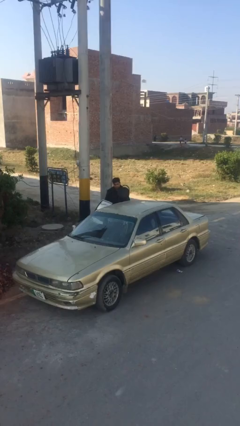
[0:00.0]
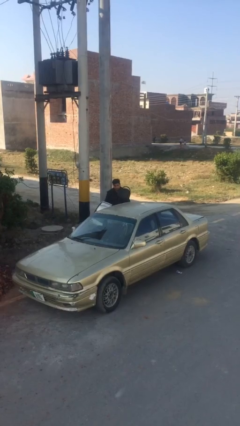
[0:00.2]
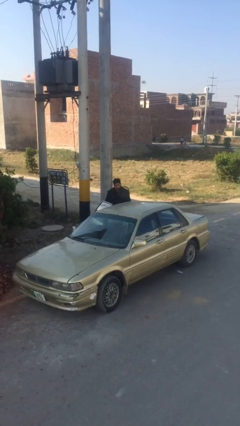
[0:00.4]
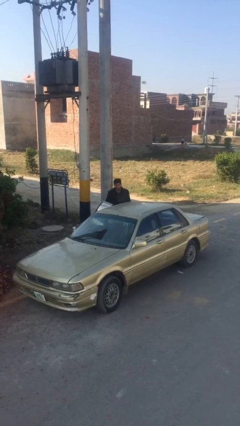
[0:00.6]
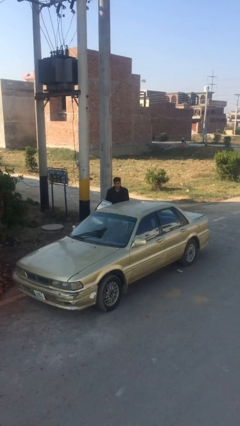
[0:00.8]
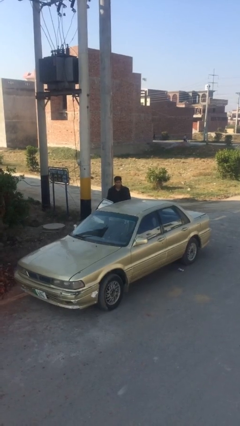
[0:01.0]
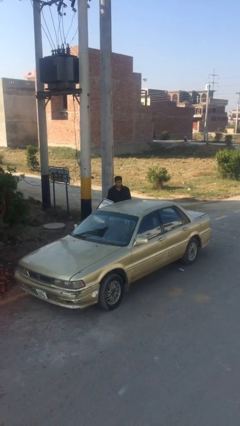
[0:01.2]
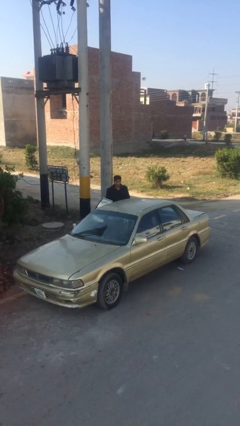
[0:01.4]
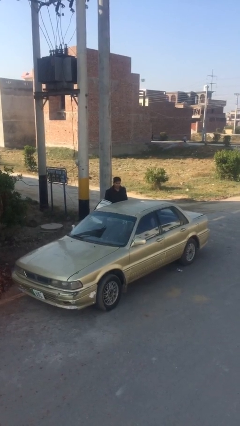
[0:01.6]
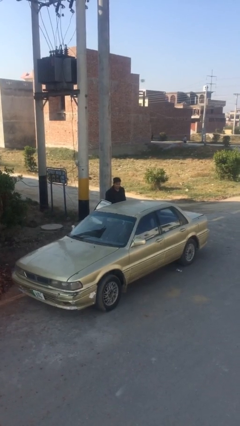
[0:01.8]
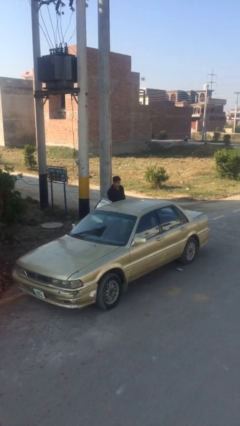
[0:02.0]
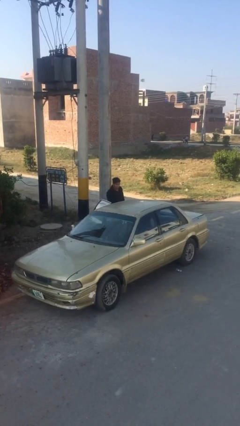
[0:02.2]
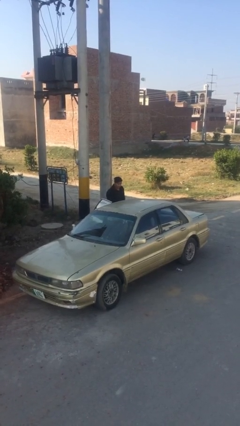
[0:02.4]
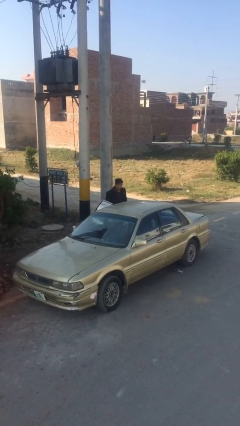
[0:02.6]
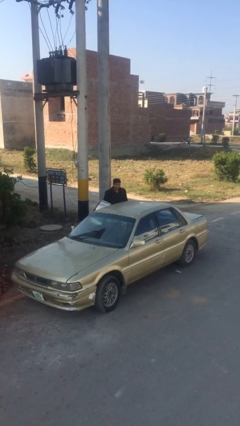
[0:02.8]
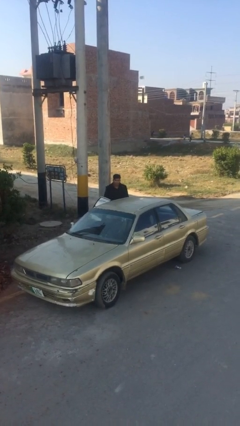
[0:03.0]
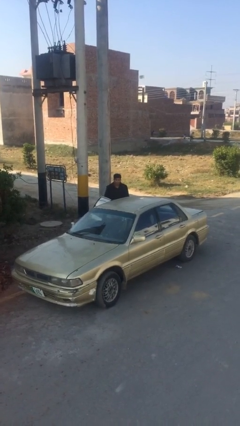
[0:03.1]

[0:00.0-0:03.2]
person loads car

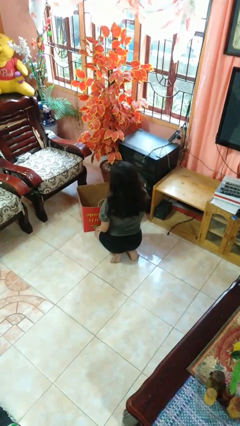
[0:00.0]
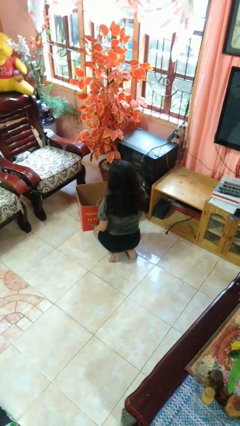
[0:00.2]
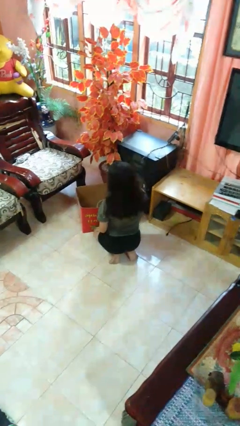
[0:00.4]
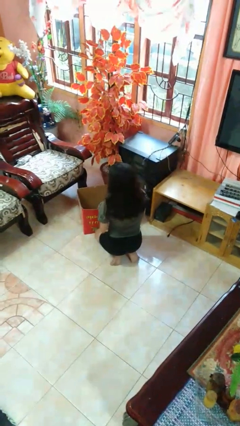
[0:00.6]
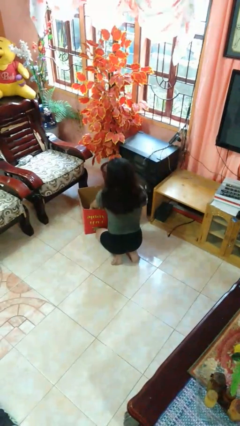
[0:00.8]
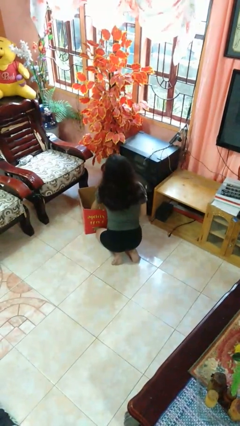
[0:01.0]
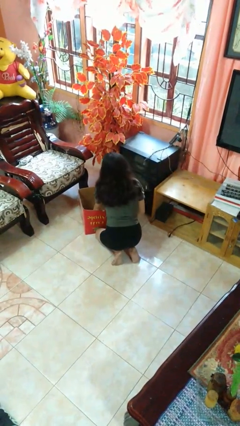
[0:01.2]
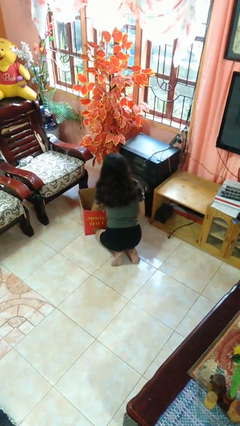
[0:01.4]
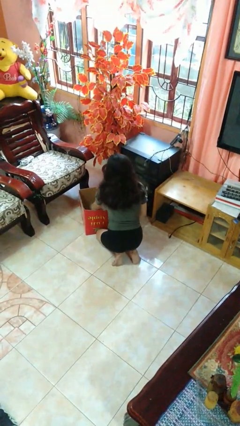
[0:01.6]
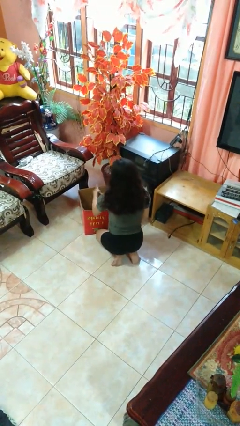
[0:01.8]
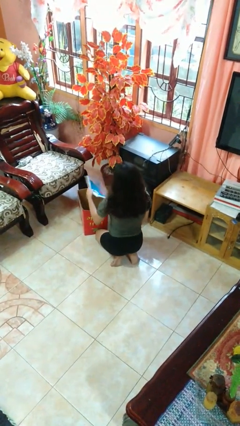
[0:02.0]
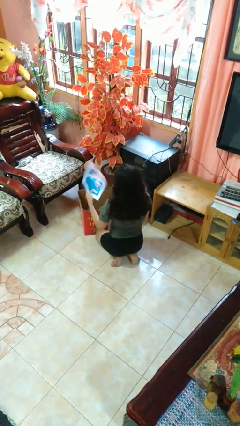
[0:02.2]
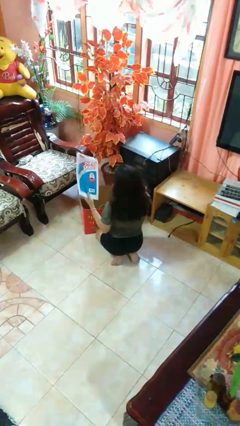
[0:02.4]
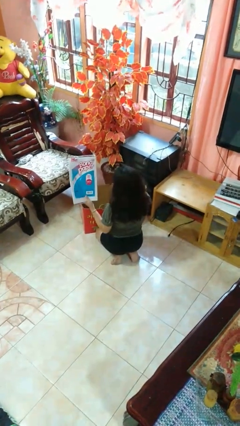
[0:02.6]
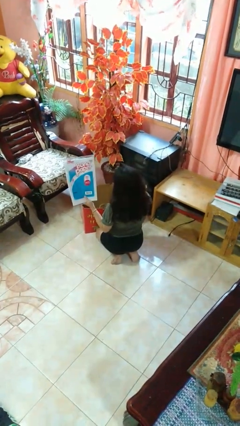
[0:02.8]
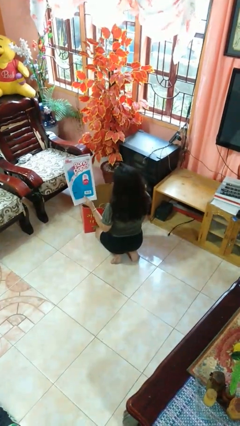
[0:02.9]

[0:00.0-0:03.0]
person takes object from box

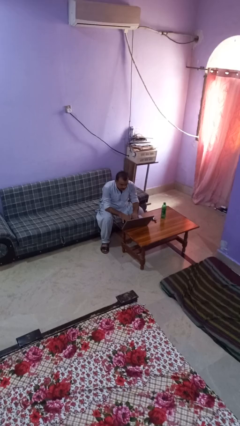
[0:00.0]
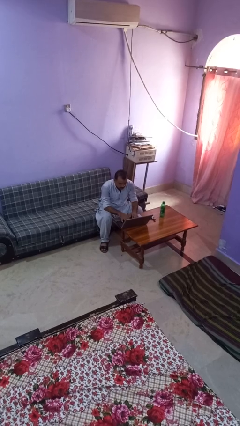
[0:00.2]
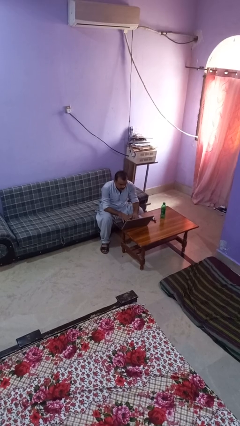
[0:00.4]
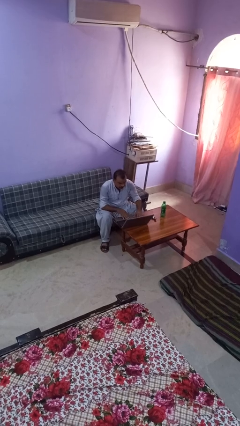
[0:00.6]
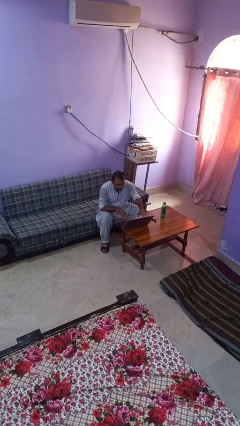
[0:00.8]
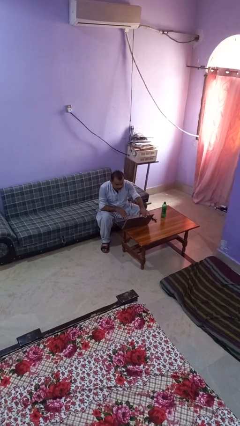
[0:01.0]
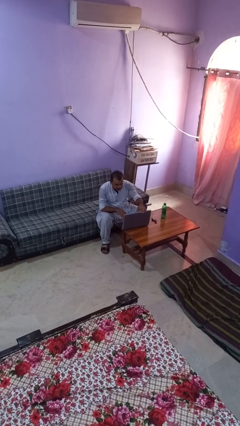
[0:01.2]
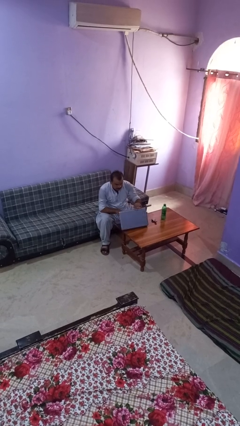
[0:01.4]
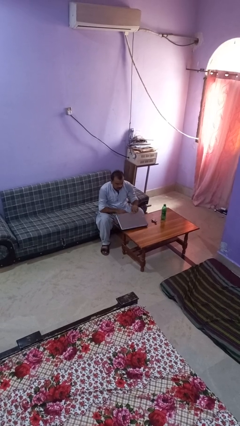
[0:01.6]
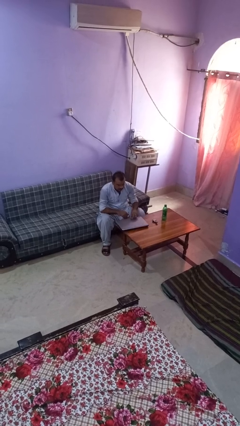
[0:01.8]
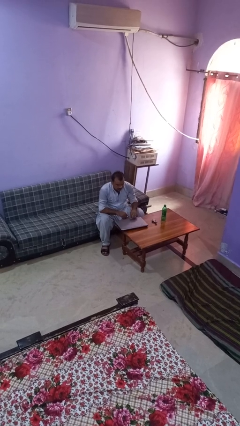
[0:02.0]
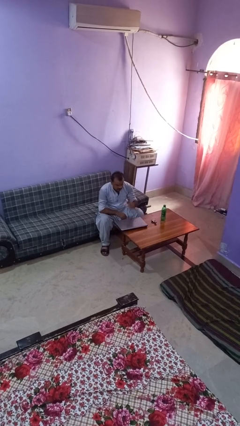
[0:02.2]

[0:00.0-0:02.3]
person closes laptop

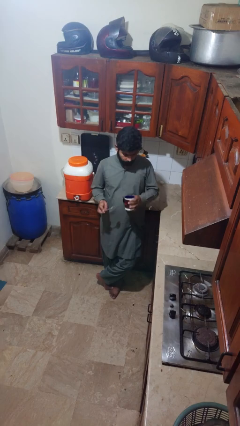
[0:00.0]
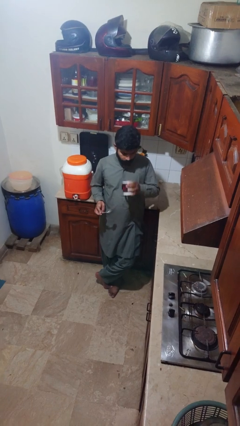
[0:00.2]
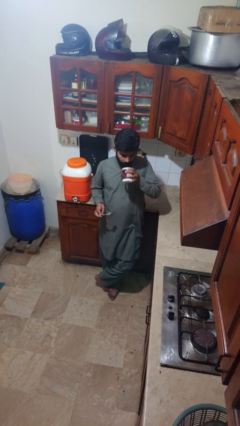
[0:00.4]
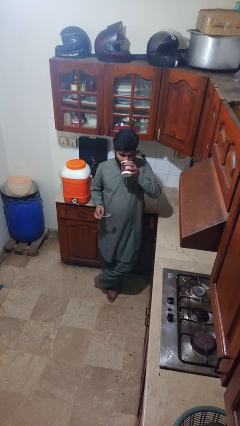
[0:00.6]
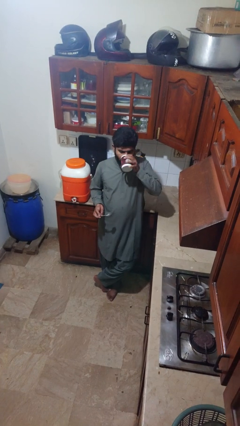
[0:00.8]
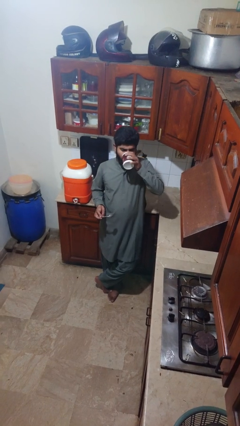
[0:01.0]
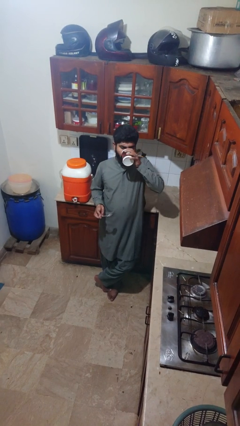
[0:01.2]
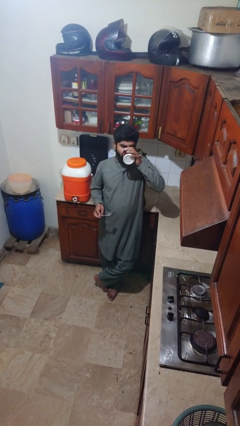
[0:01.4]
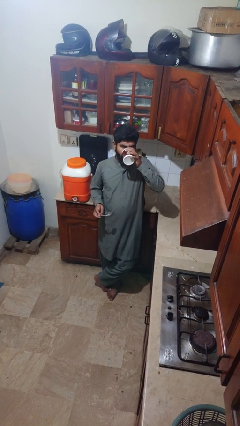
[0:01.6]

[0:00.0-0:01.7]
person drinks from mug

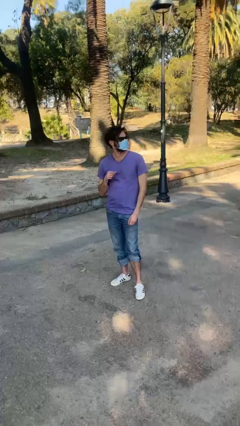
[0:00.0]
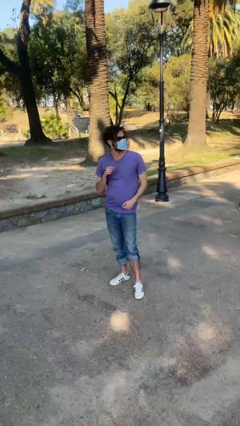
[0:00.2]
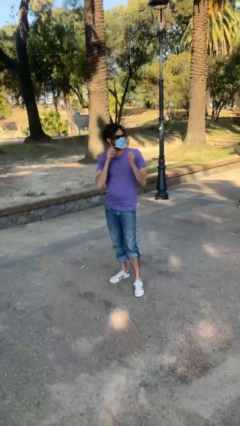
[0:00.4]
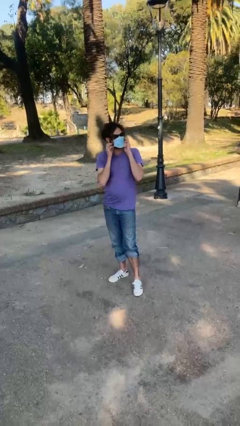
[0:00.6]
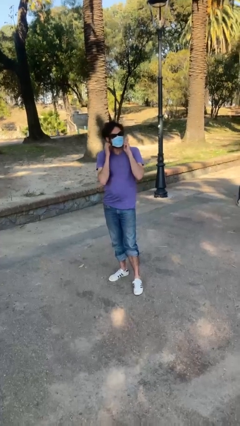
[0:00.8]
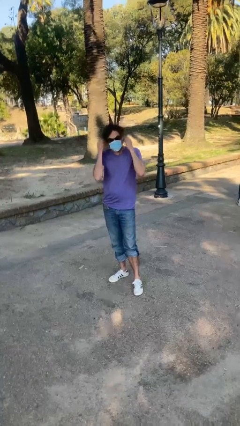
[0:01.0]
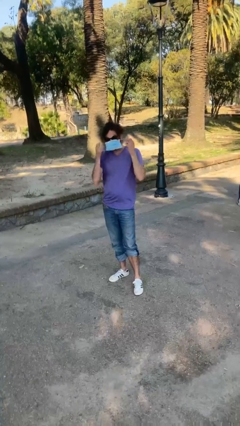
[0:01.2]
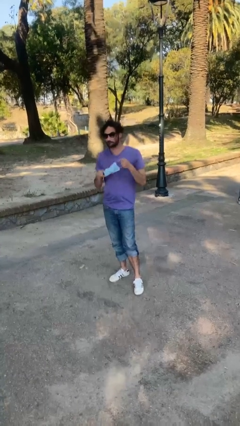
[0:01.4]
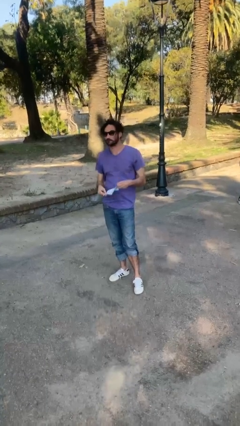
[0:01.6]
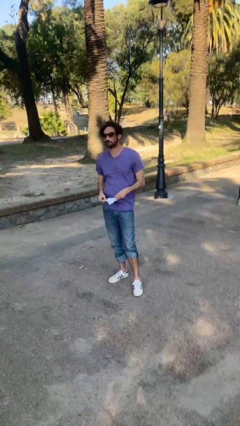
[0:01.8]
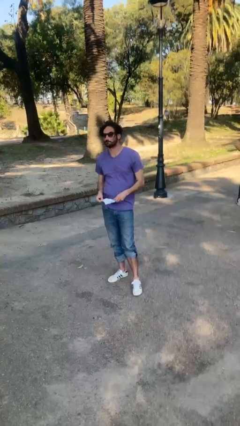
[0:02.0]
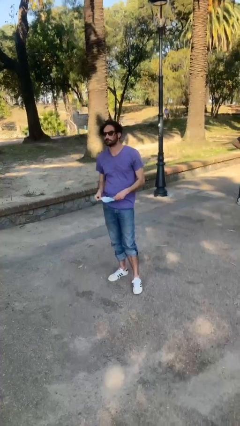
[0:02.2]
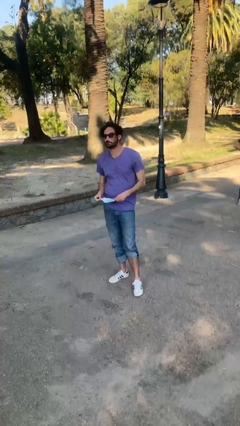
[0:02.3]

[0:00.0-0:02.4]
person takes off facemask

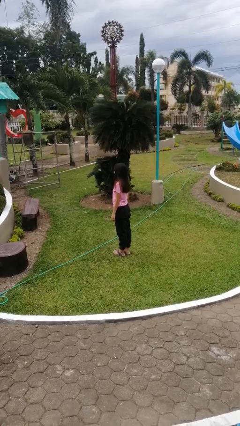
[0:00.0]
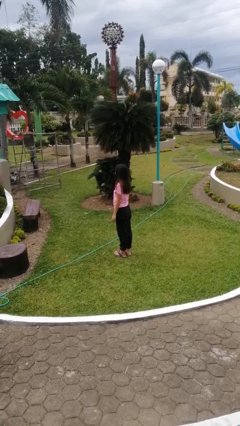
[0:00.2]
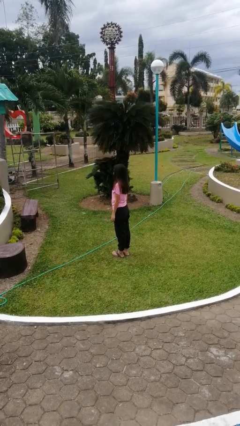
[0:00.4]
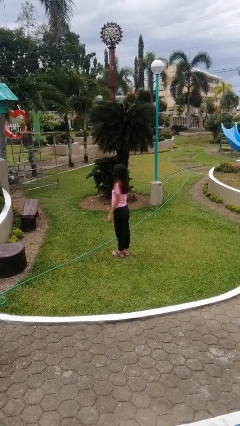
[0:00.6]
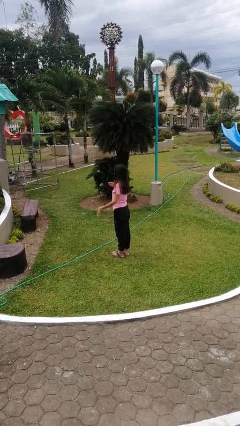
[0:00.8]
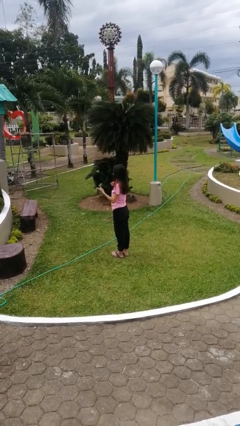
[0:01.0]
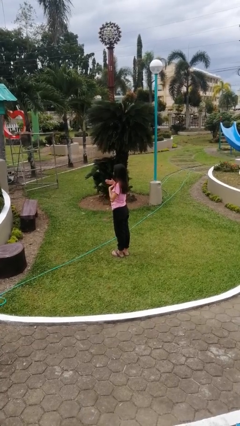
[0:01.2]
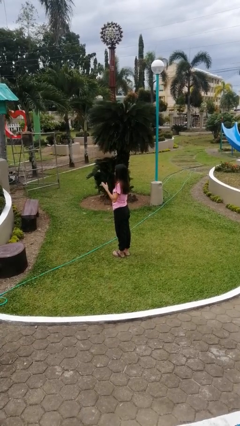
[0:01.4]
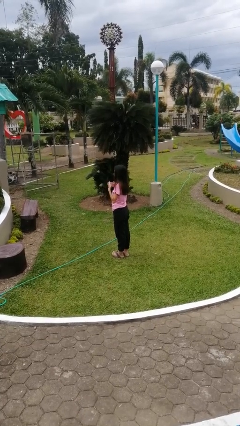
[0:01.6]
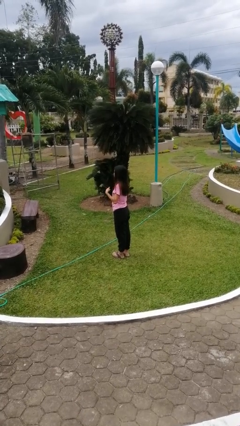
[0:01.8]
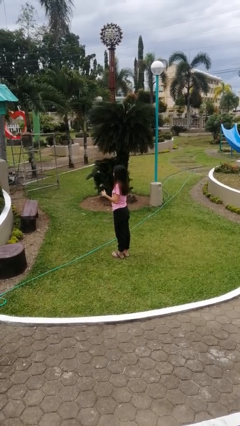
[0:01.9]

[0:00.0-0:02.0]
person drums on chest

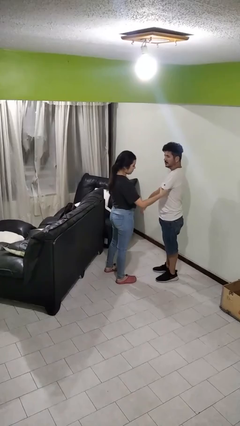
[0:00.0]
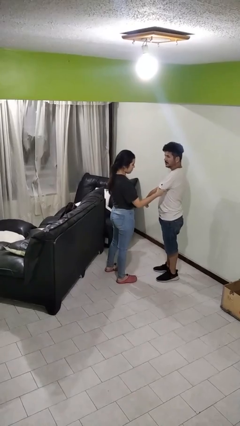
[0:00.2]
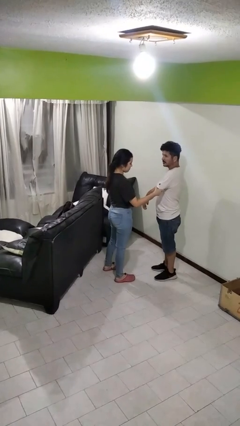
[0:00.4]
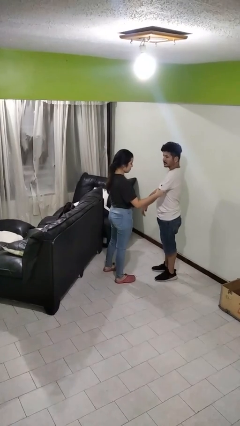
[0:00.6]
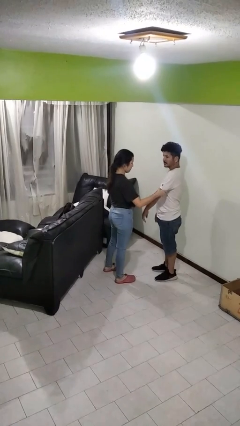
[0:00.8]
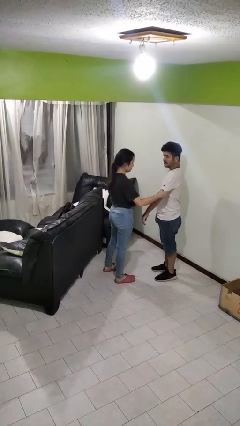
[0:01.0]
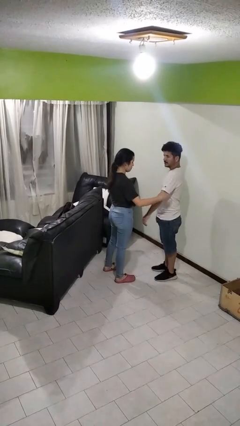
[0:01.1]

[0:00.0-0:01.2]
person grabs person by bicep

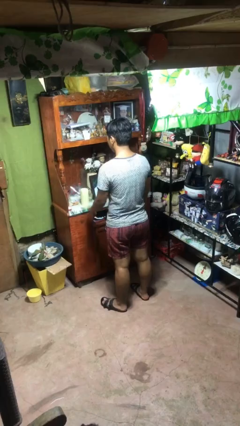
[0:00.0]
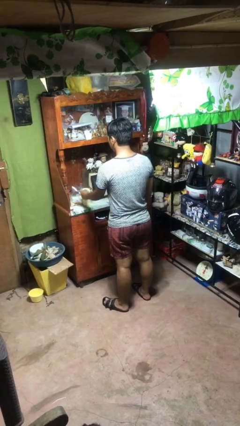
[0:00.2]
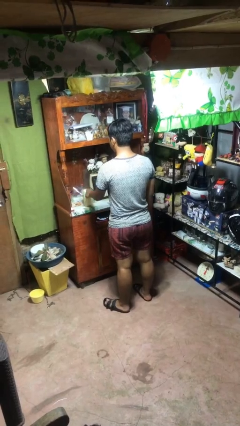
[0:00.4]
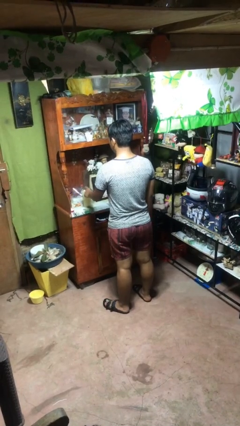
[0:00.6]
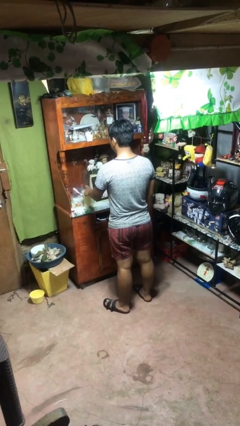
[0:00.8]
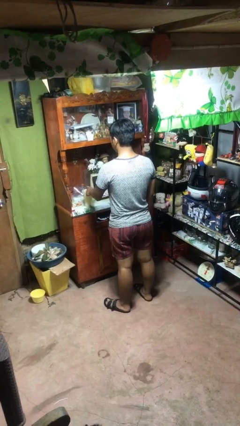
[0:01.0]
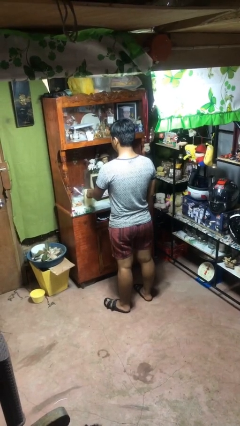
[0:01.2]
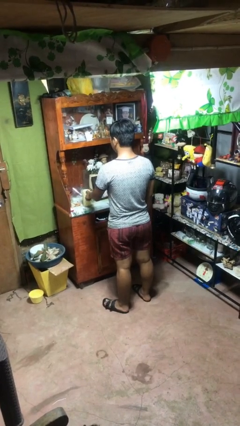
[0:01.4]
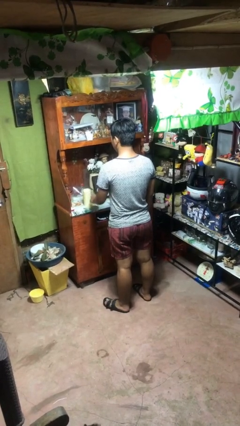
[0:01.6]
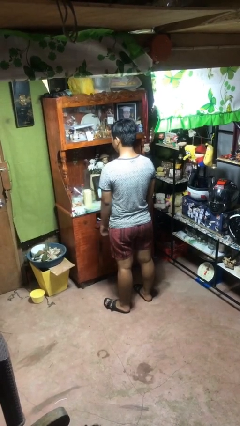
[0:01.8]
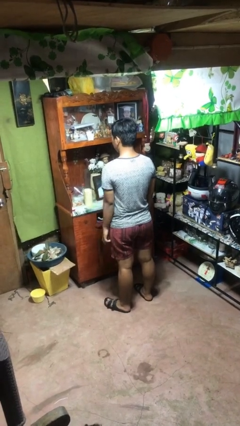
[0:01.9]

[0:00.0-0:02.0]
person taps object with finger
